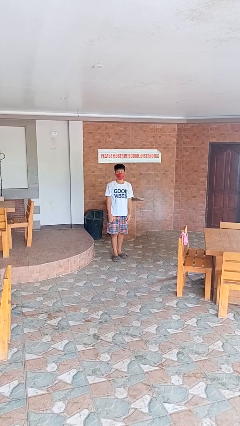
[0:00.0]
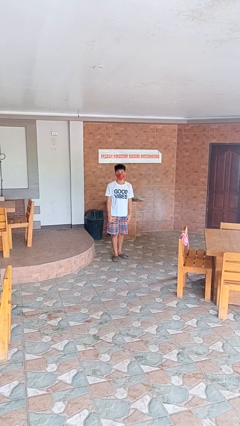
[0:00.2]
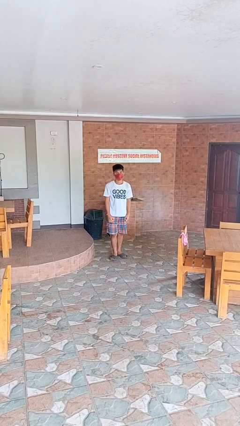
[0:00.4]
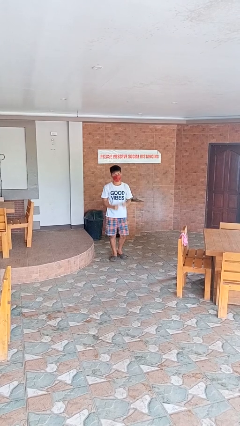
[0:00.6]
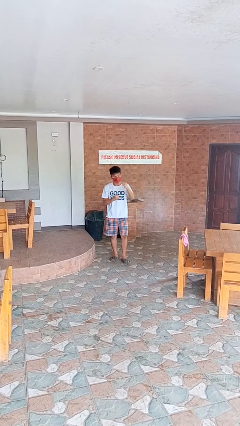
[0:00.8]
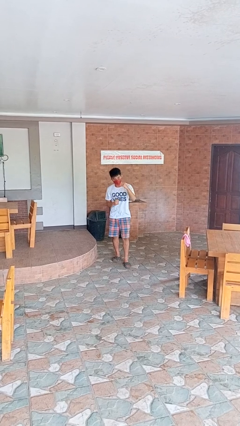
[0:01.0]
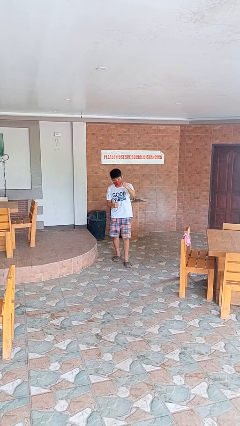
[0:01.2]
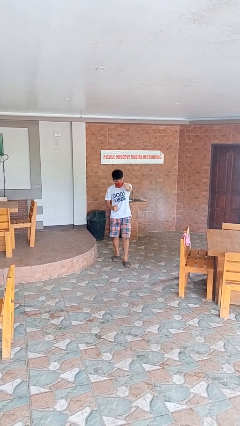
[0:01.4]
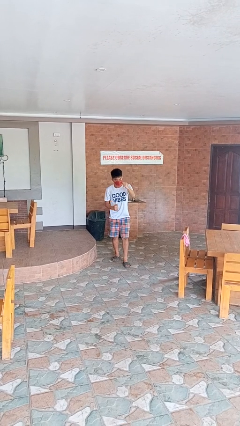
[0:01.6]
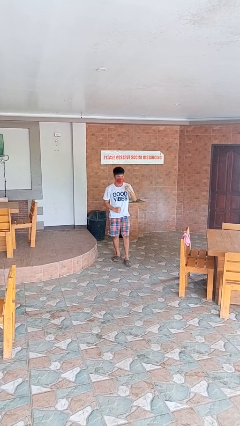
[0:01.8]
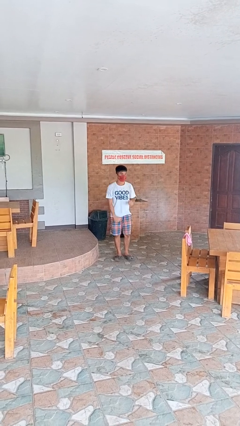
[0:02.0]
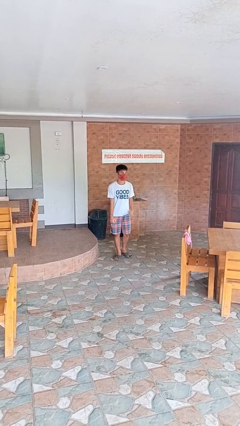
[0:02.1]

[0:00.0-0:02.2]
person punches

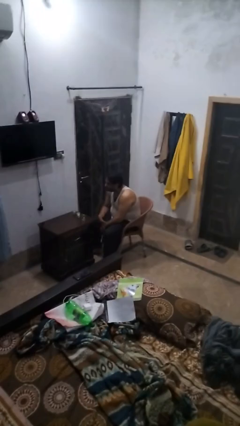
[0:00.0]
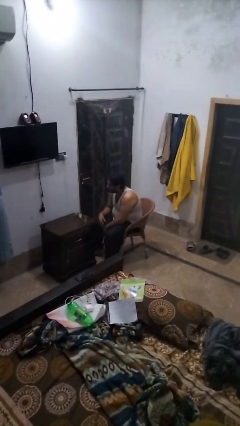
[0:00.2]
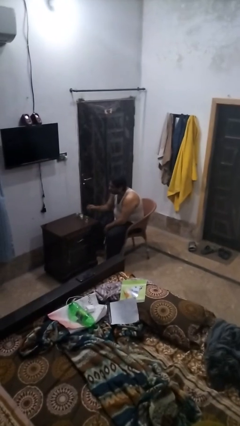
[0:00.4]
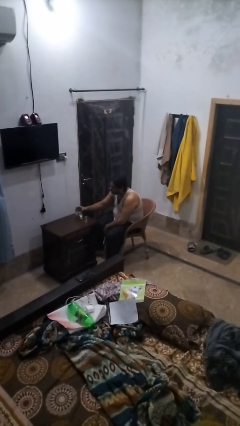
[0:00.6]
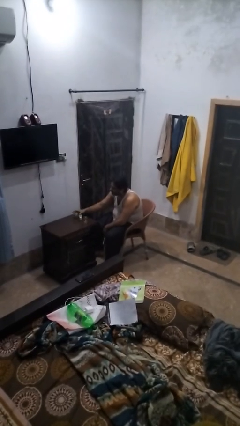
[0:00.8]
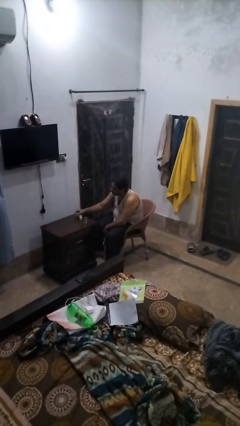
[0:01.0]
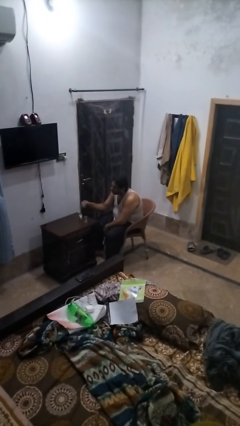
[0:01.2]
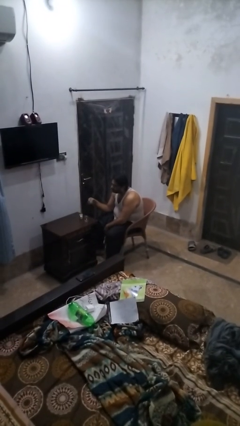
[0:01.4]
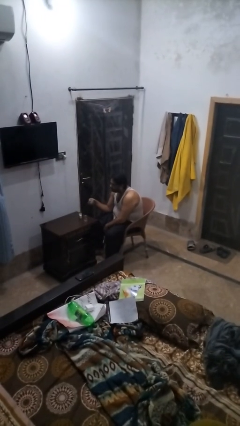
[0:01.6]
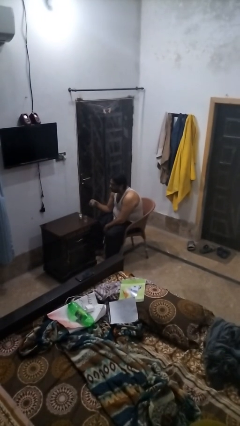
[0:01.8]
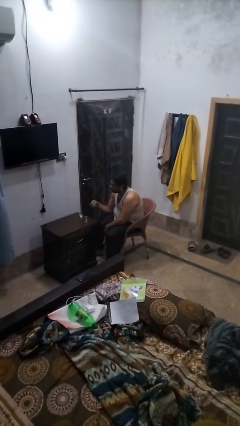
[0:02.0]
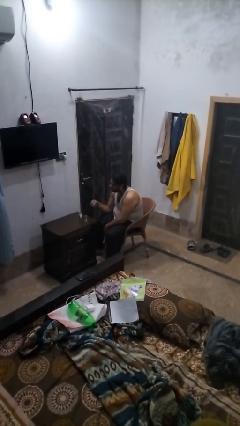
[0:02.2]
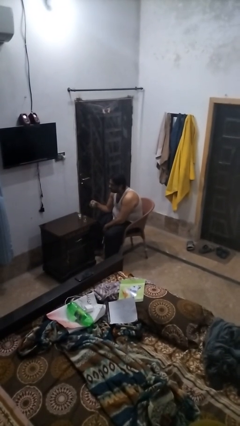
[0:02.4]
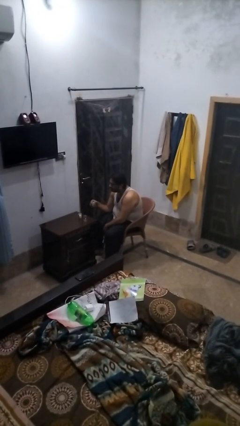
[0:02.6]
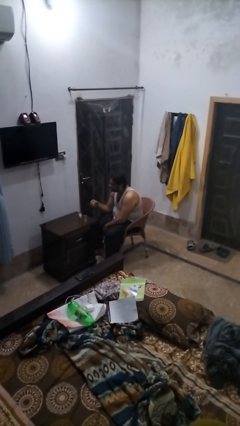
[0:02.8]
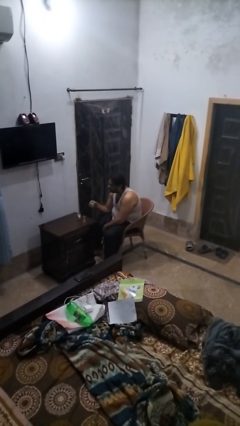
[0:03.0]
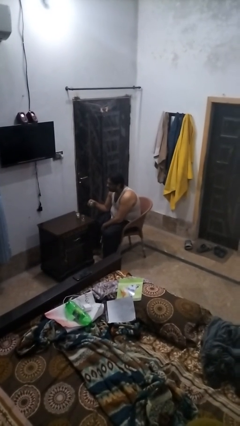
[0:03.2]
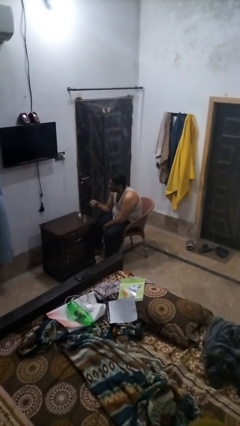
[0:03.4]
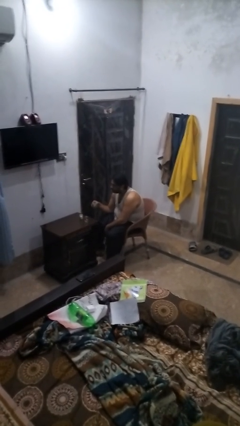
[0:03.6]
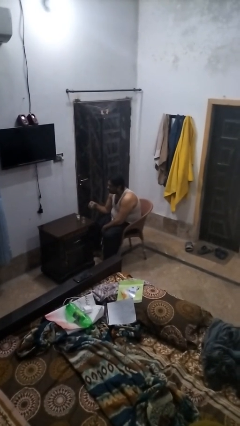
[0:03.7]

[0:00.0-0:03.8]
person picks up object from table

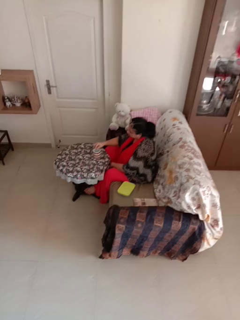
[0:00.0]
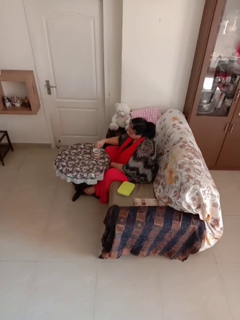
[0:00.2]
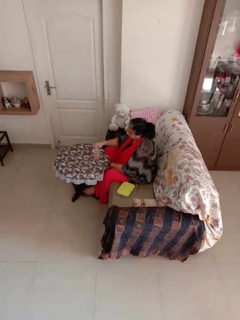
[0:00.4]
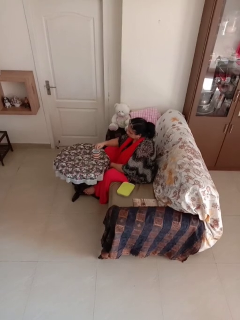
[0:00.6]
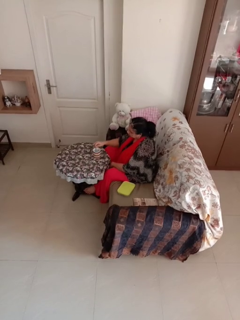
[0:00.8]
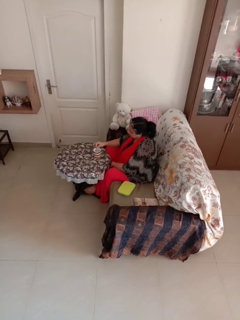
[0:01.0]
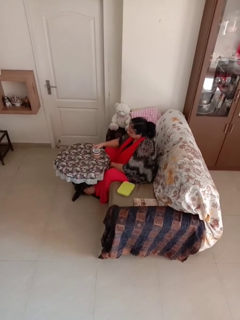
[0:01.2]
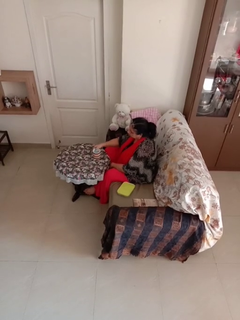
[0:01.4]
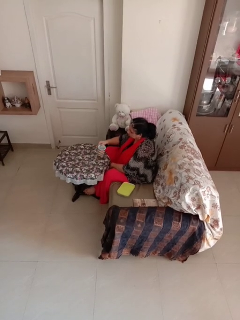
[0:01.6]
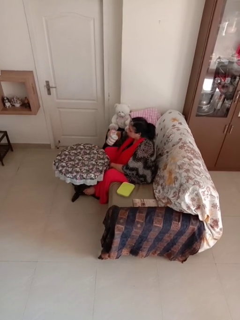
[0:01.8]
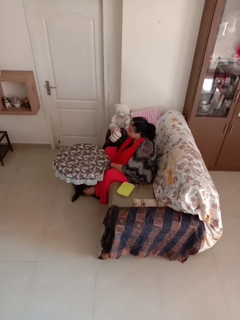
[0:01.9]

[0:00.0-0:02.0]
person stirs mug

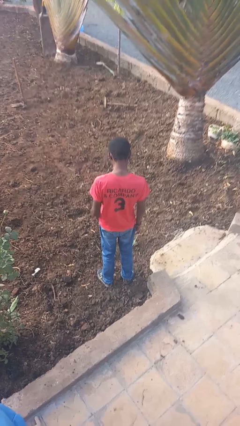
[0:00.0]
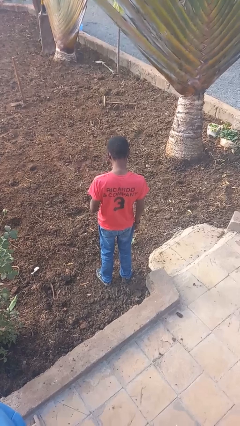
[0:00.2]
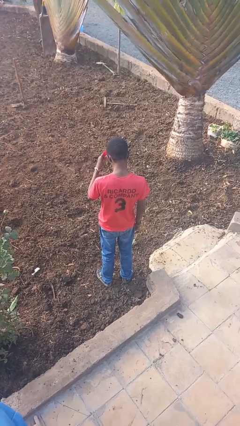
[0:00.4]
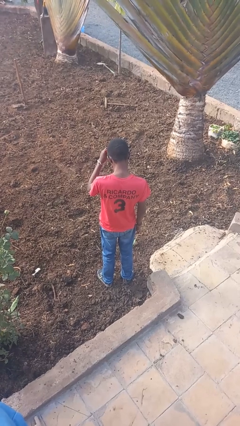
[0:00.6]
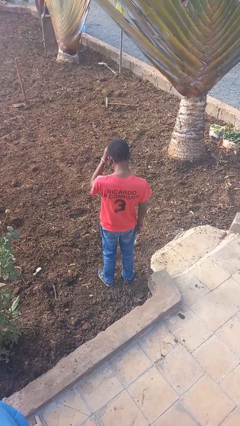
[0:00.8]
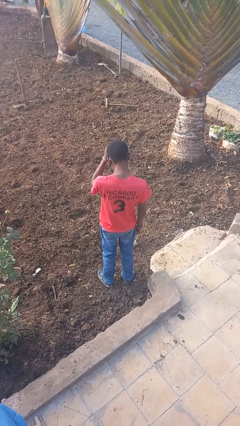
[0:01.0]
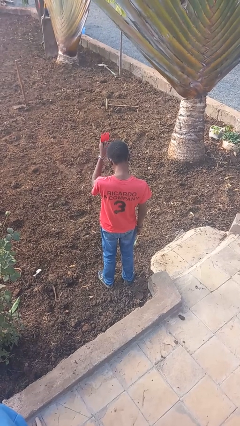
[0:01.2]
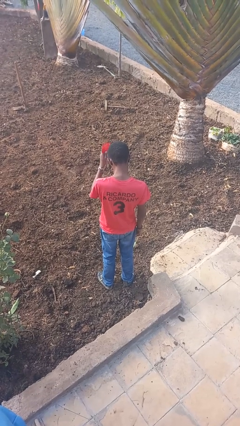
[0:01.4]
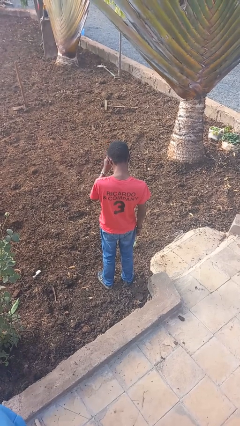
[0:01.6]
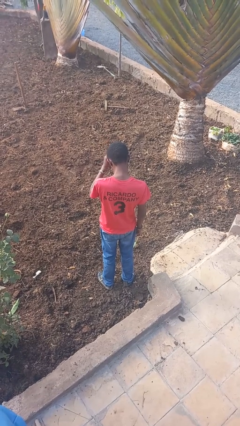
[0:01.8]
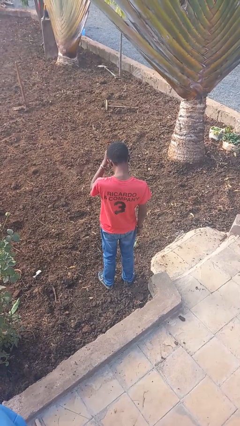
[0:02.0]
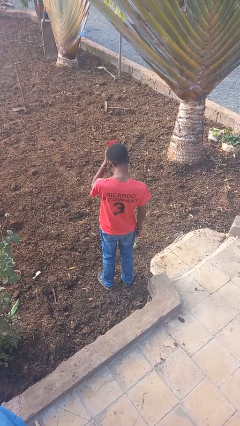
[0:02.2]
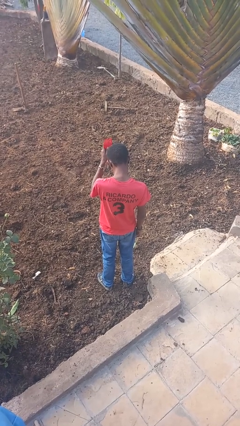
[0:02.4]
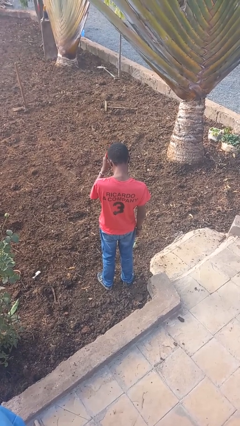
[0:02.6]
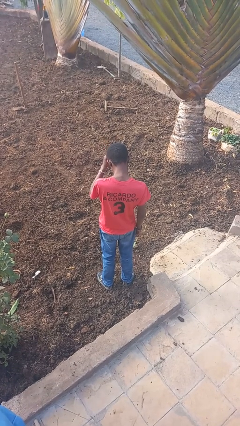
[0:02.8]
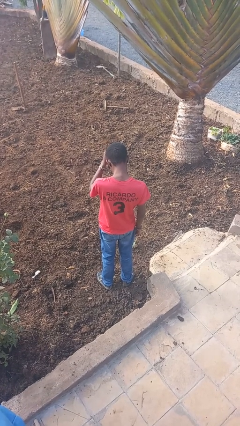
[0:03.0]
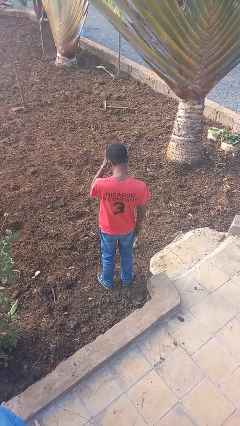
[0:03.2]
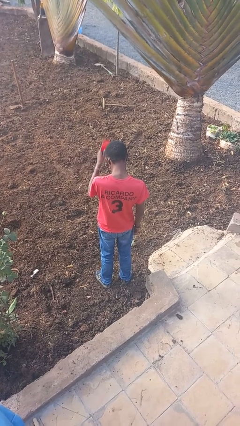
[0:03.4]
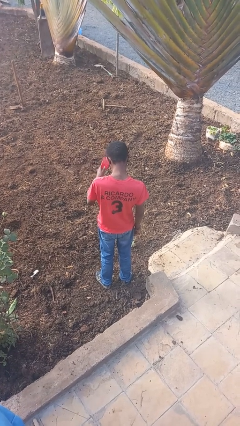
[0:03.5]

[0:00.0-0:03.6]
person brushes hair

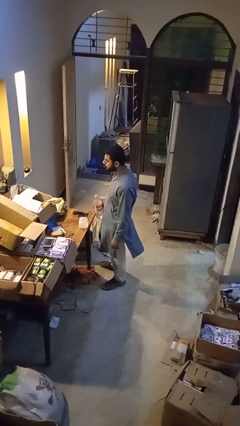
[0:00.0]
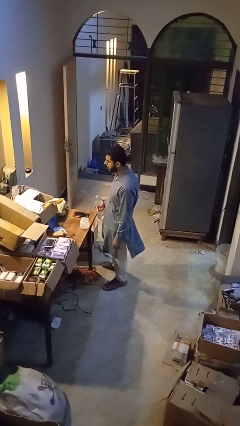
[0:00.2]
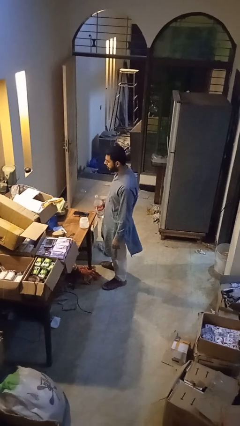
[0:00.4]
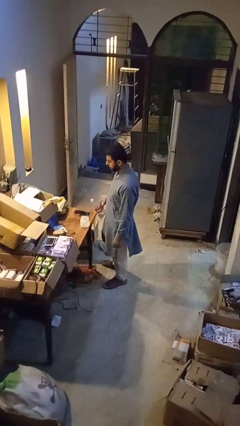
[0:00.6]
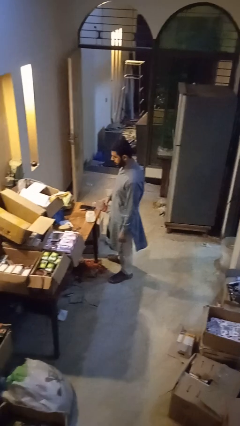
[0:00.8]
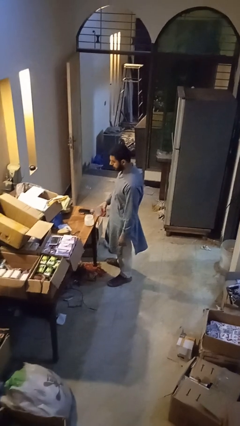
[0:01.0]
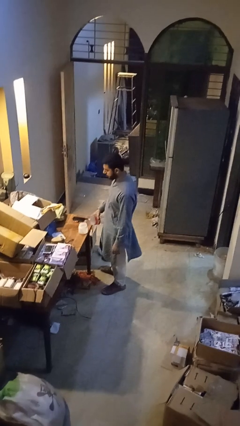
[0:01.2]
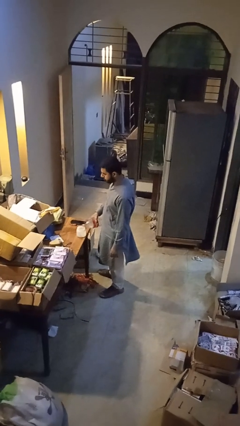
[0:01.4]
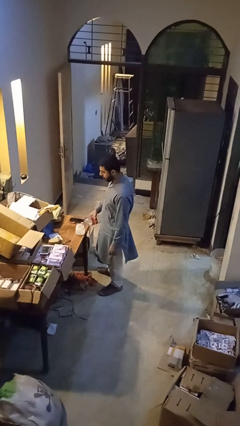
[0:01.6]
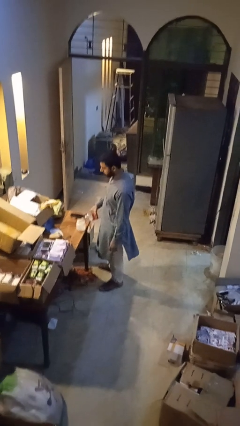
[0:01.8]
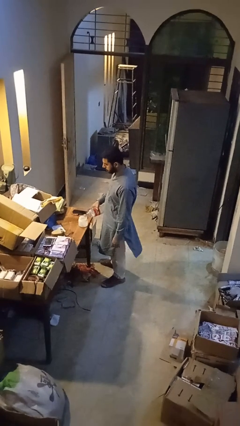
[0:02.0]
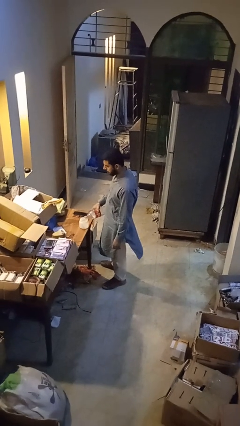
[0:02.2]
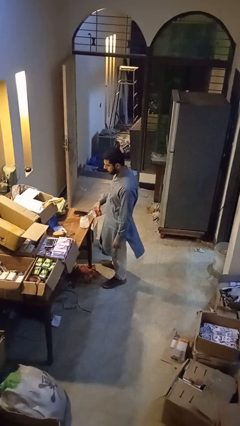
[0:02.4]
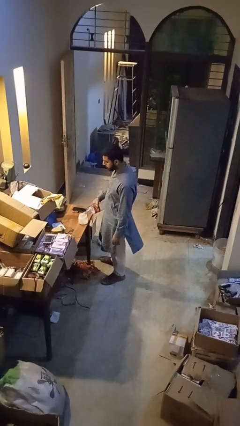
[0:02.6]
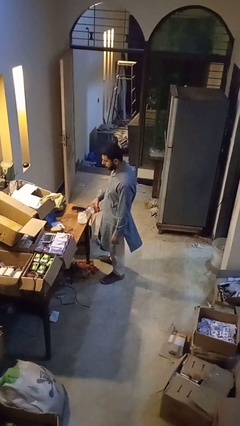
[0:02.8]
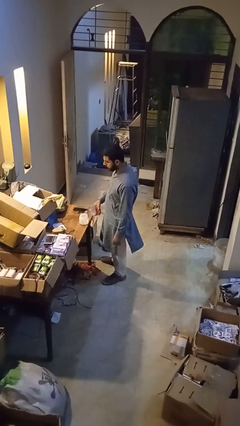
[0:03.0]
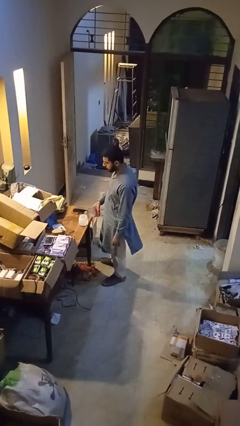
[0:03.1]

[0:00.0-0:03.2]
person pours liquid into cup

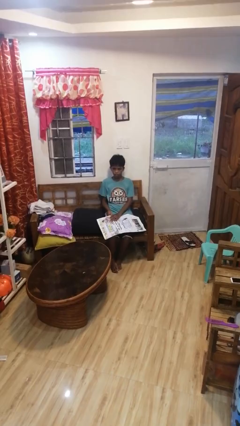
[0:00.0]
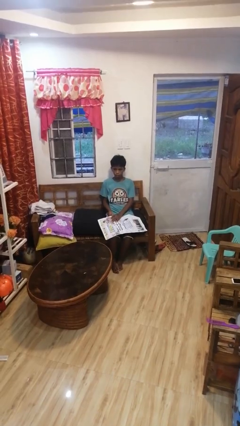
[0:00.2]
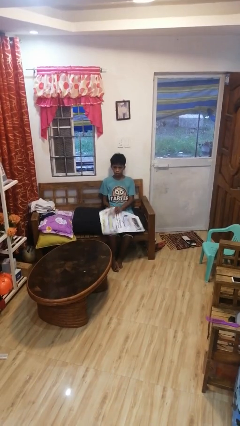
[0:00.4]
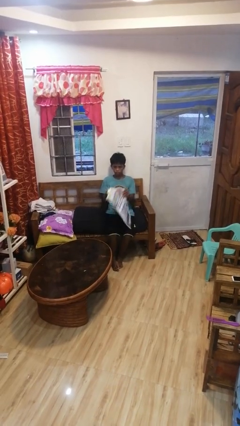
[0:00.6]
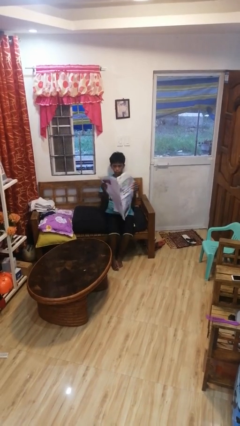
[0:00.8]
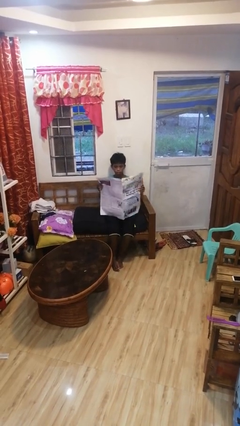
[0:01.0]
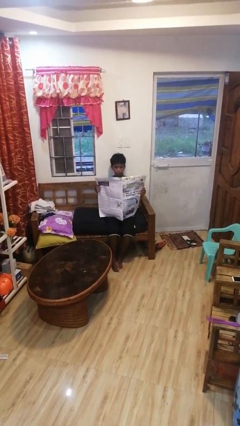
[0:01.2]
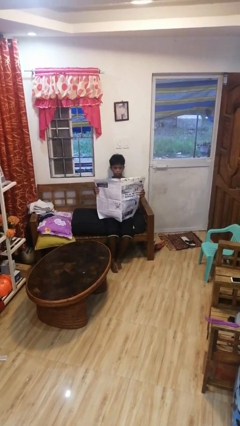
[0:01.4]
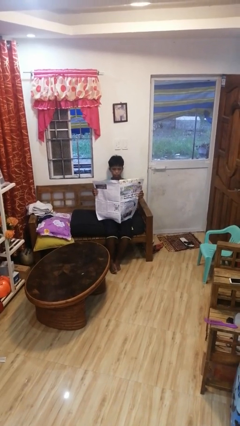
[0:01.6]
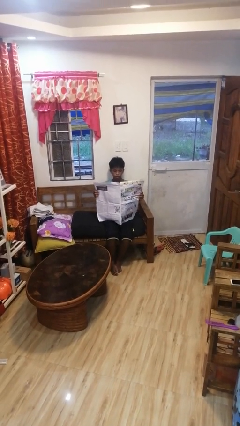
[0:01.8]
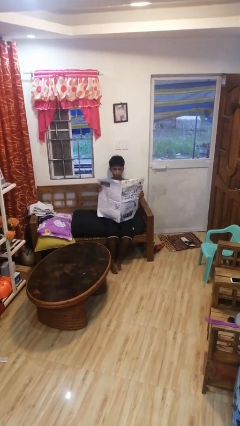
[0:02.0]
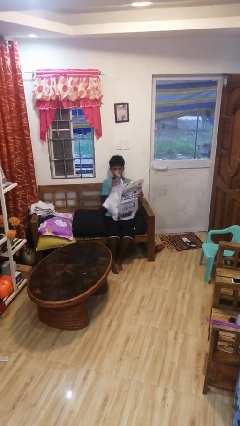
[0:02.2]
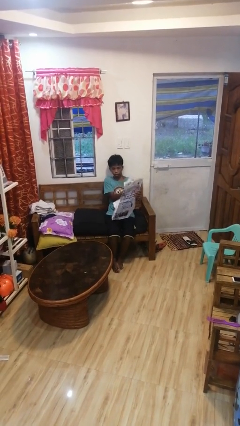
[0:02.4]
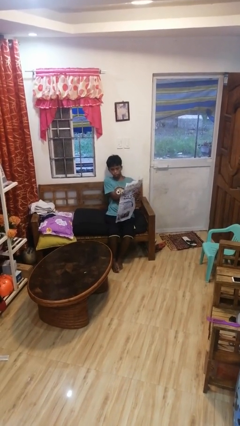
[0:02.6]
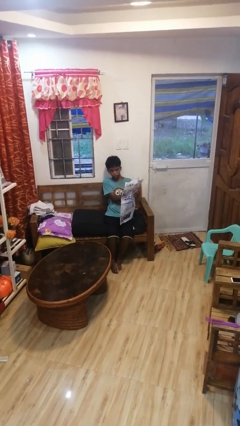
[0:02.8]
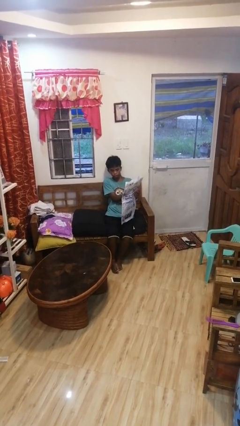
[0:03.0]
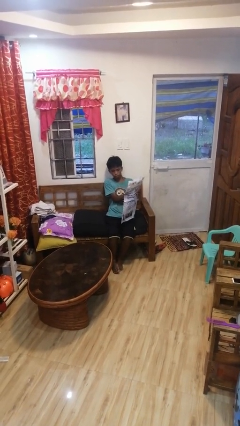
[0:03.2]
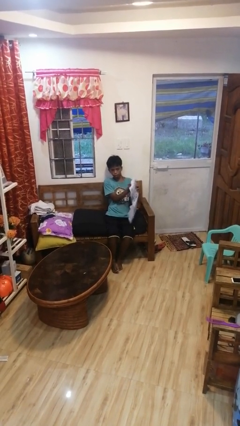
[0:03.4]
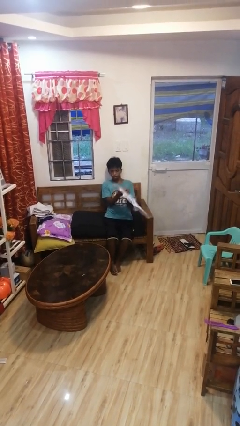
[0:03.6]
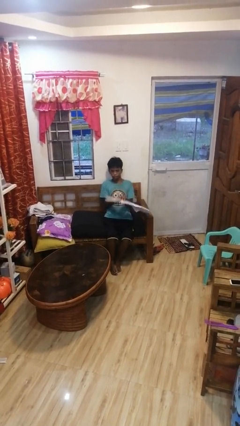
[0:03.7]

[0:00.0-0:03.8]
person reads newspaper
